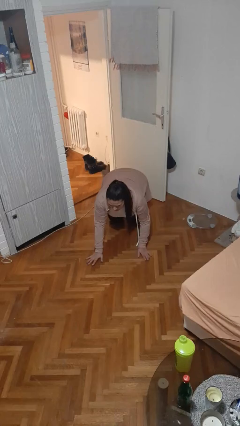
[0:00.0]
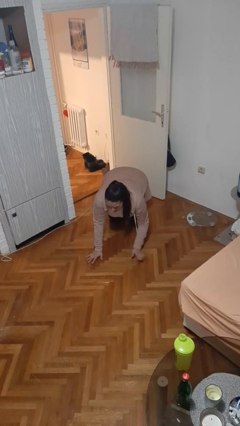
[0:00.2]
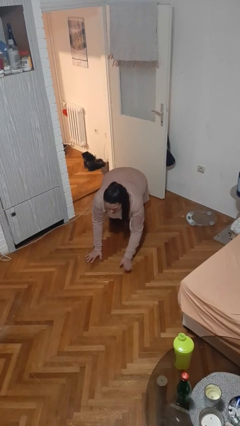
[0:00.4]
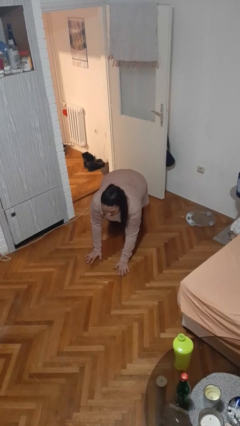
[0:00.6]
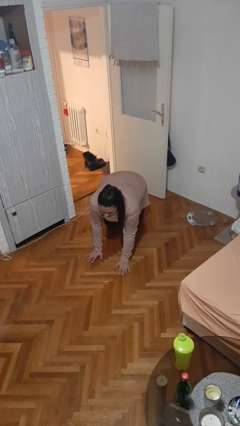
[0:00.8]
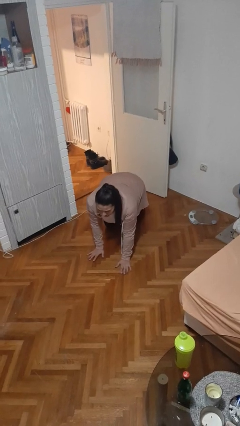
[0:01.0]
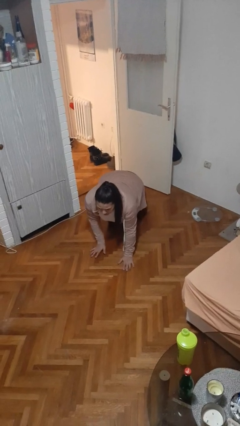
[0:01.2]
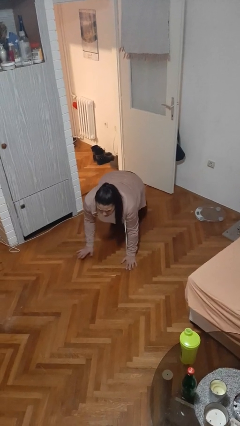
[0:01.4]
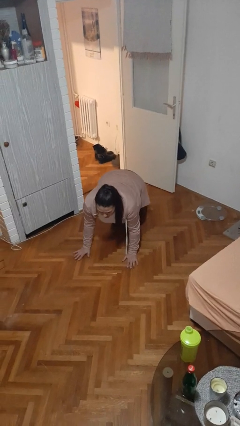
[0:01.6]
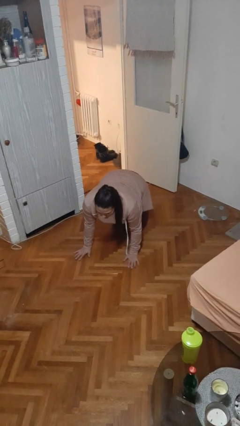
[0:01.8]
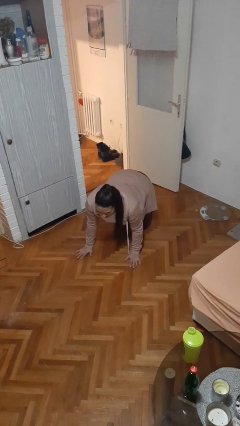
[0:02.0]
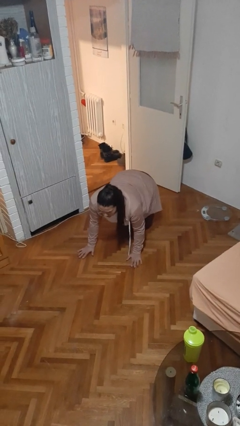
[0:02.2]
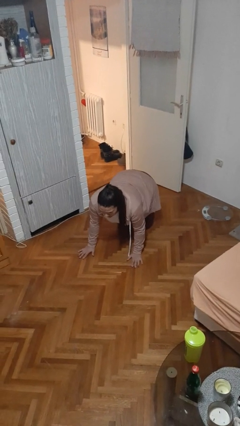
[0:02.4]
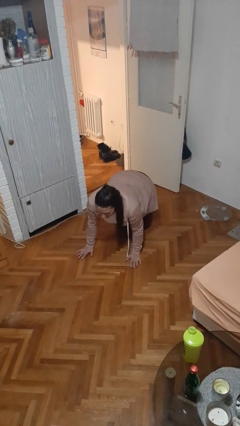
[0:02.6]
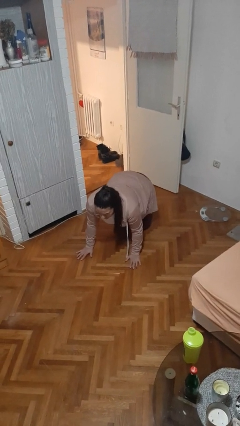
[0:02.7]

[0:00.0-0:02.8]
person crawls

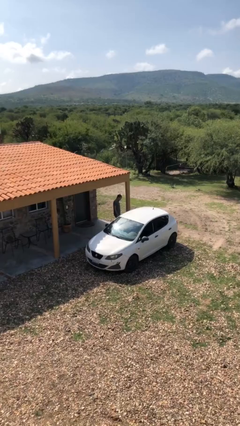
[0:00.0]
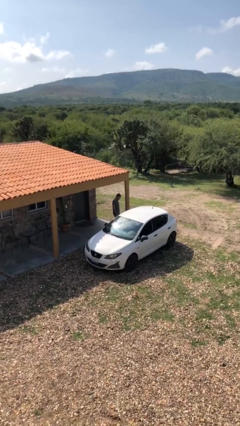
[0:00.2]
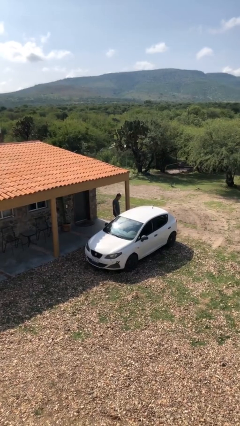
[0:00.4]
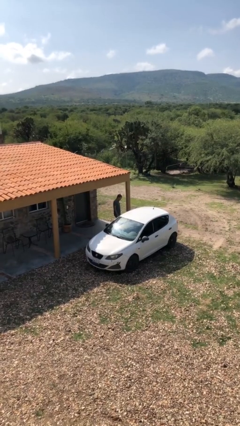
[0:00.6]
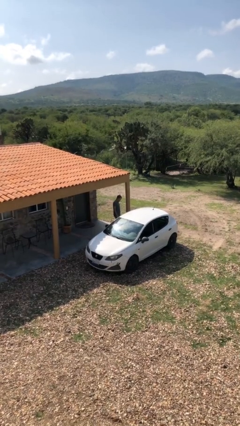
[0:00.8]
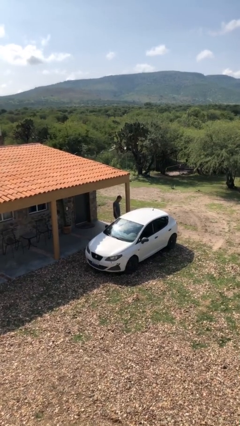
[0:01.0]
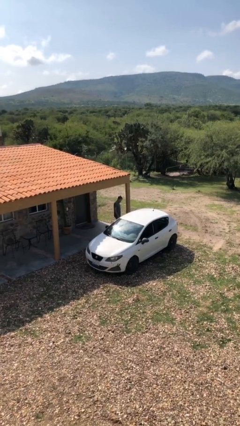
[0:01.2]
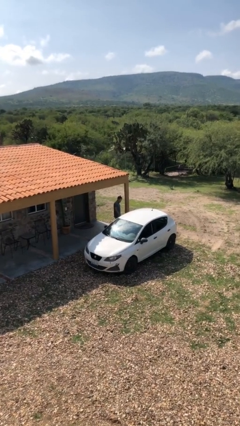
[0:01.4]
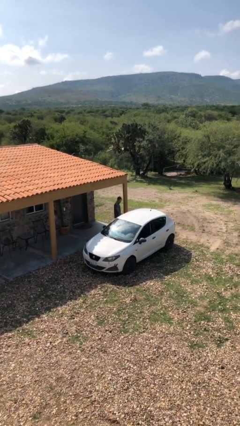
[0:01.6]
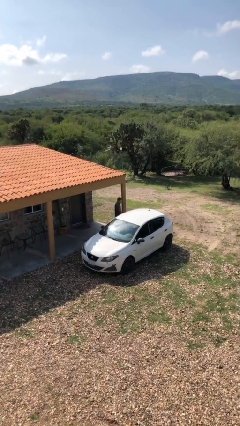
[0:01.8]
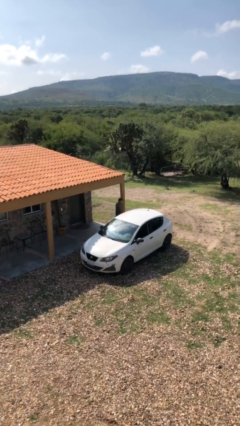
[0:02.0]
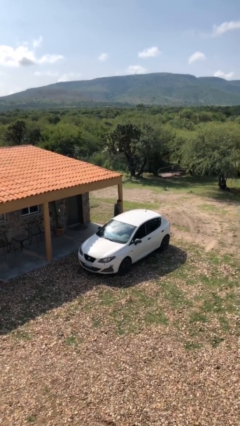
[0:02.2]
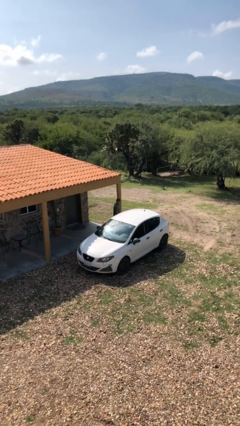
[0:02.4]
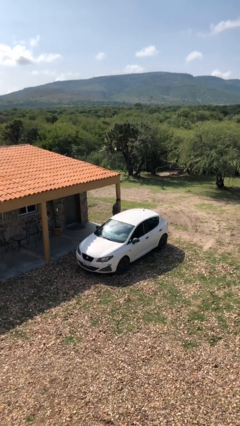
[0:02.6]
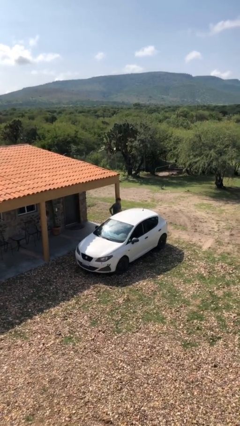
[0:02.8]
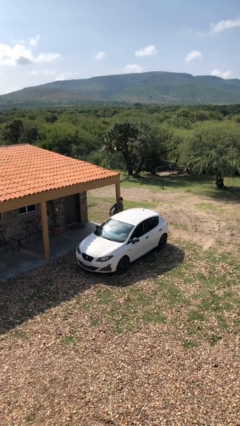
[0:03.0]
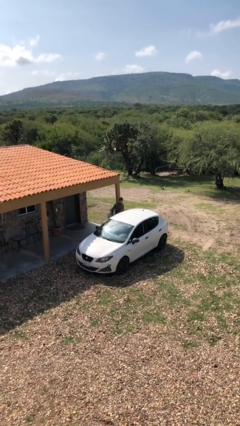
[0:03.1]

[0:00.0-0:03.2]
person opens car door

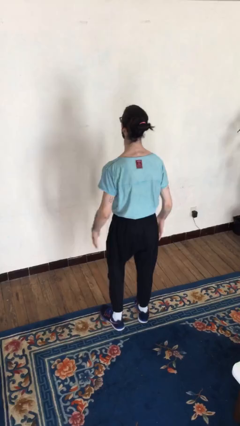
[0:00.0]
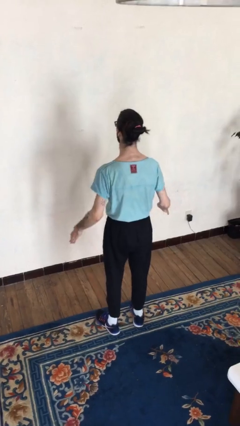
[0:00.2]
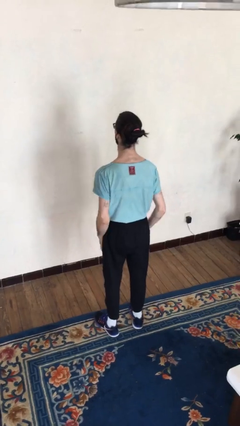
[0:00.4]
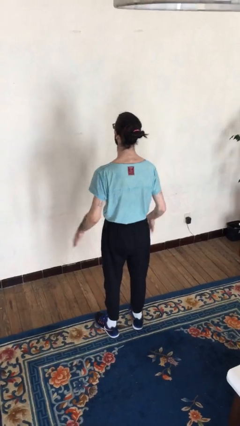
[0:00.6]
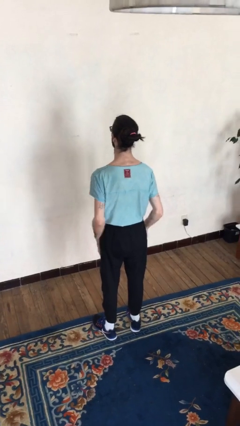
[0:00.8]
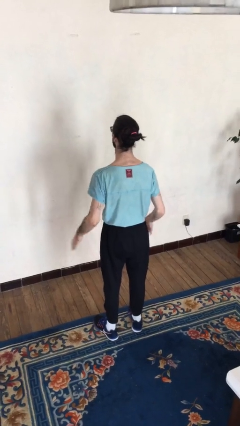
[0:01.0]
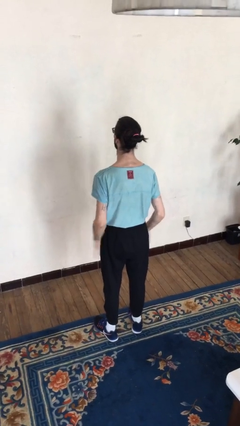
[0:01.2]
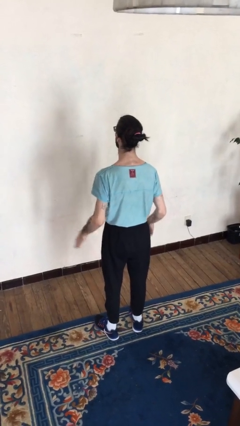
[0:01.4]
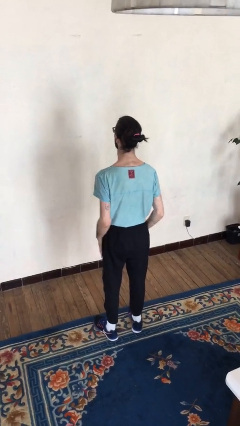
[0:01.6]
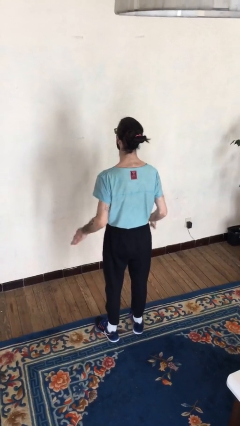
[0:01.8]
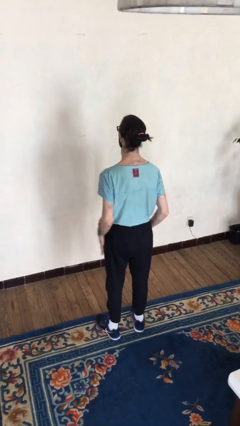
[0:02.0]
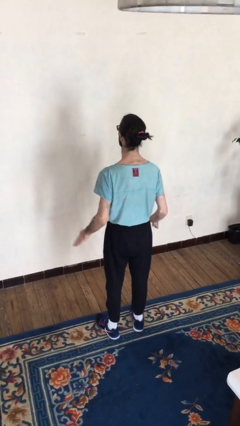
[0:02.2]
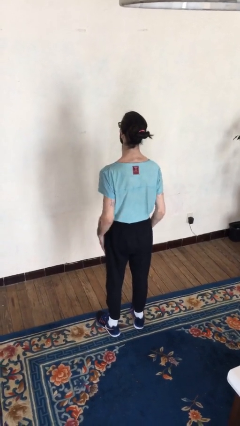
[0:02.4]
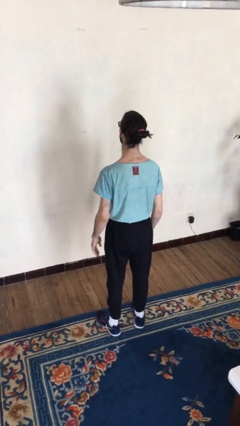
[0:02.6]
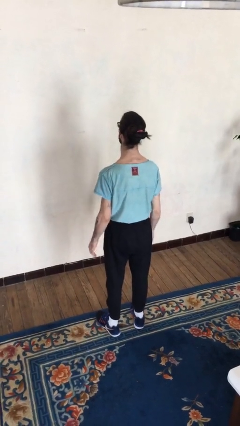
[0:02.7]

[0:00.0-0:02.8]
person slaps hands on thighs

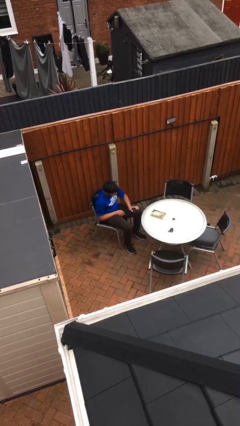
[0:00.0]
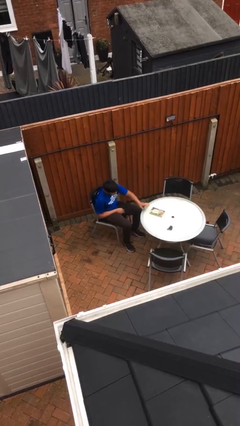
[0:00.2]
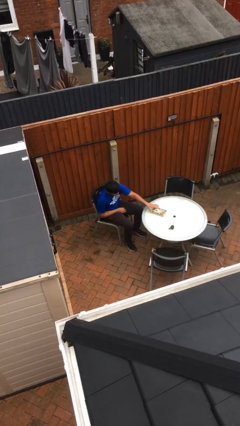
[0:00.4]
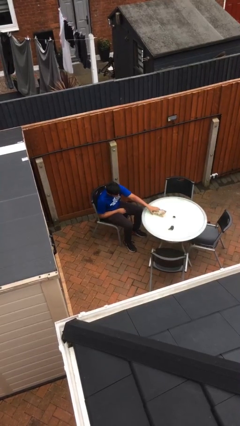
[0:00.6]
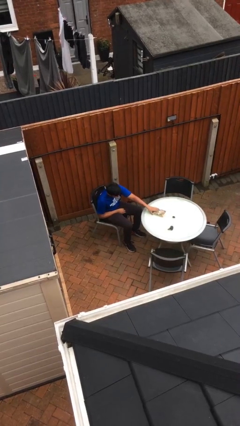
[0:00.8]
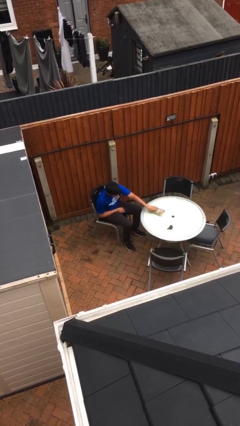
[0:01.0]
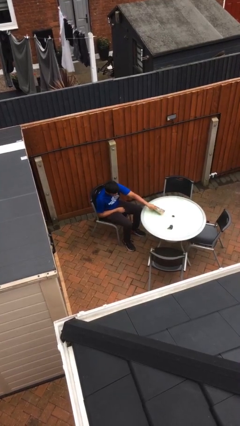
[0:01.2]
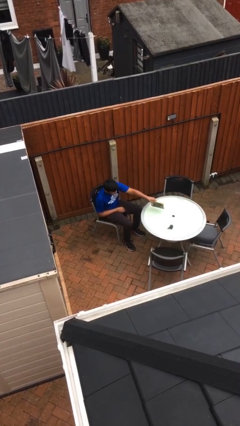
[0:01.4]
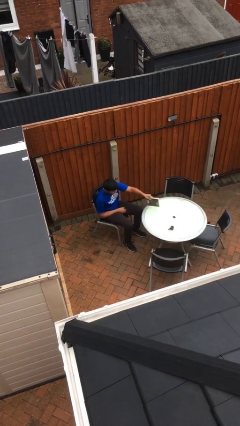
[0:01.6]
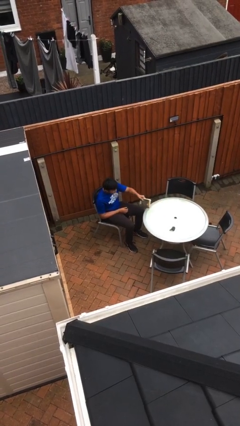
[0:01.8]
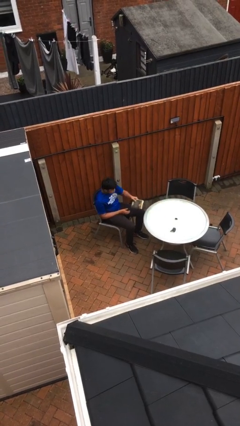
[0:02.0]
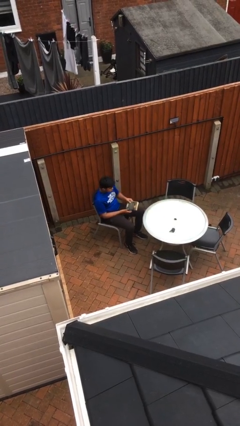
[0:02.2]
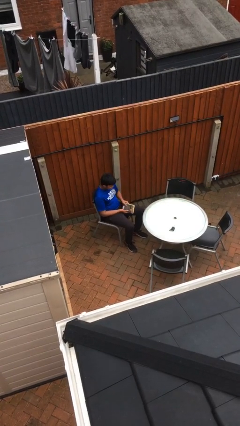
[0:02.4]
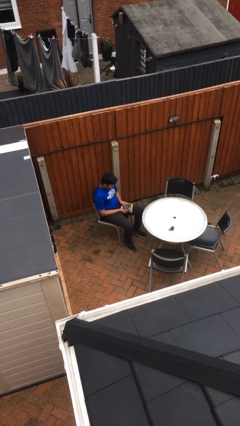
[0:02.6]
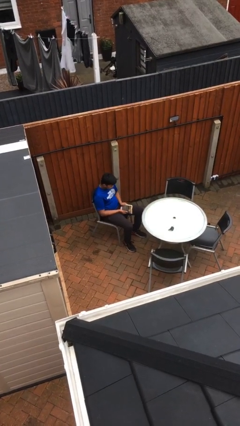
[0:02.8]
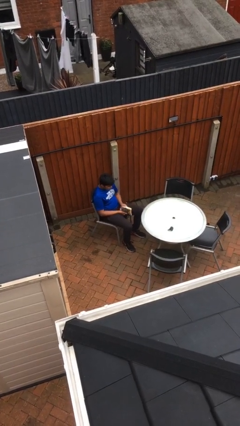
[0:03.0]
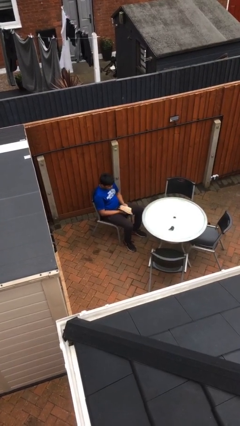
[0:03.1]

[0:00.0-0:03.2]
person picks up object from table

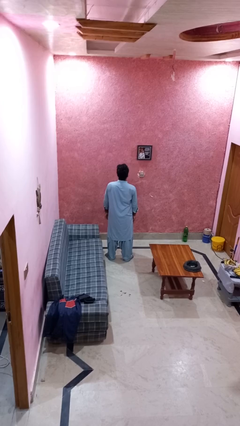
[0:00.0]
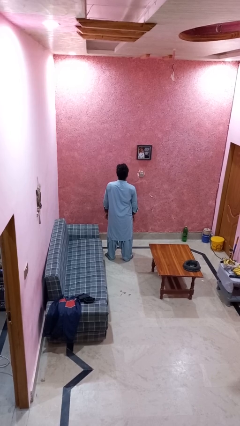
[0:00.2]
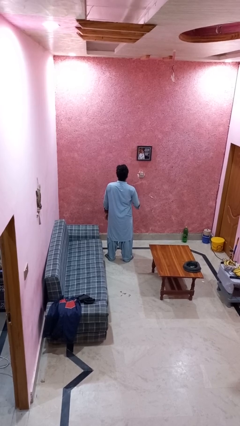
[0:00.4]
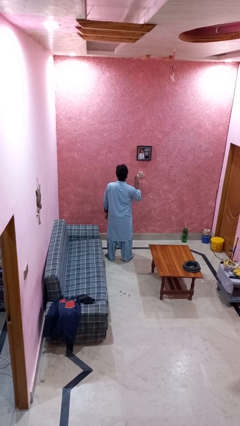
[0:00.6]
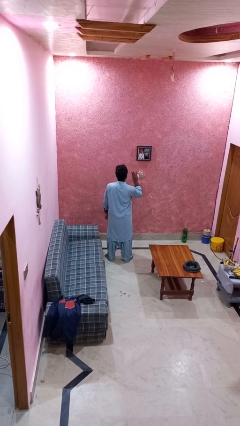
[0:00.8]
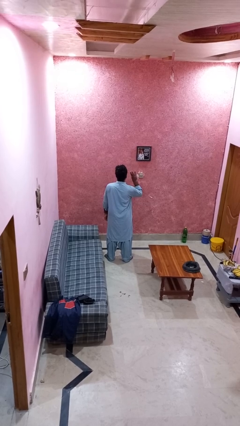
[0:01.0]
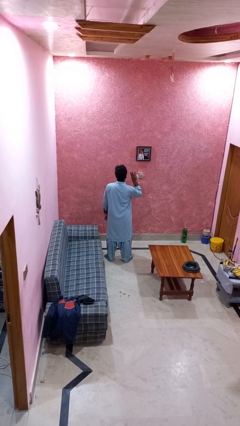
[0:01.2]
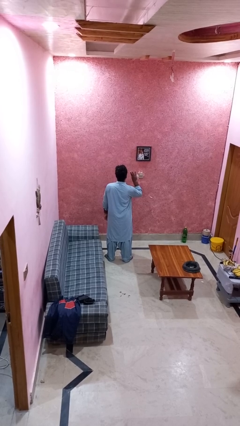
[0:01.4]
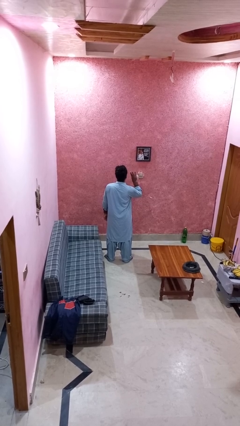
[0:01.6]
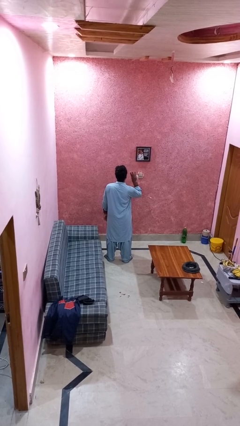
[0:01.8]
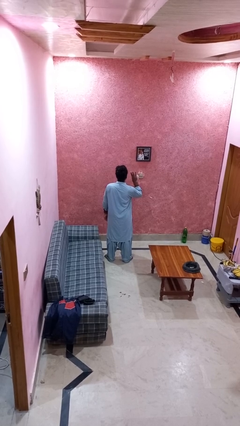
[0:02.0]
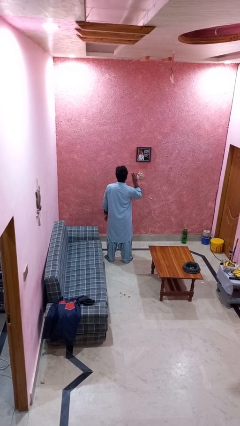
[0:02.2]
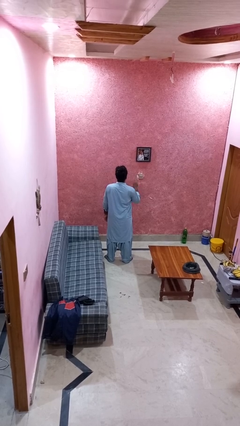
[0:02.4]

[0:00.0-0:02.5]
person gestures number three

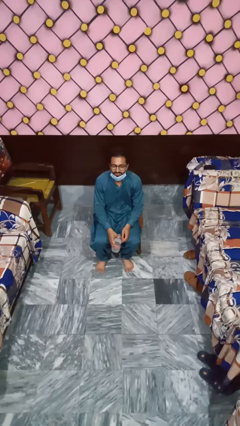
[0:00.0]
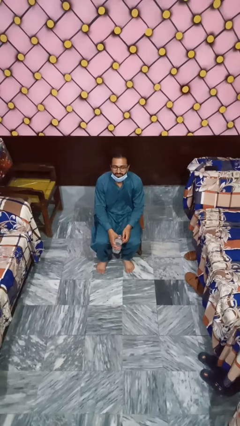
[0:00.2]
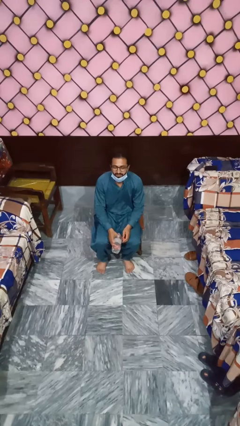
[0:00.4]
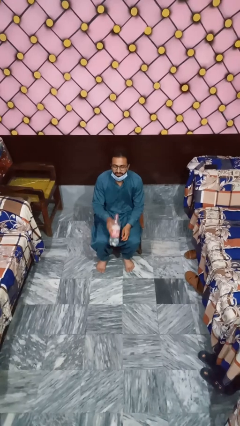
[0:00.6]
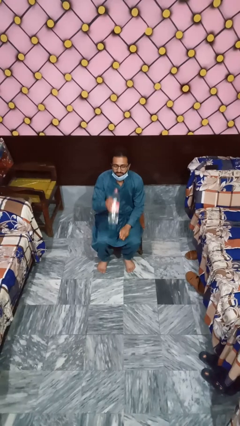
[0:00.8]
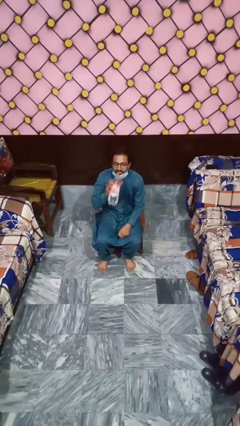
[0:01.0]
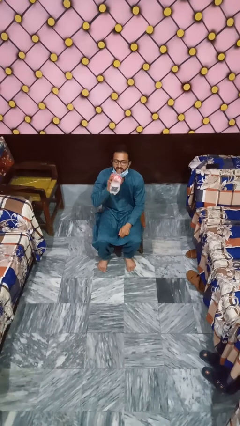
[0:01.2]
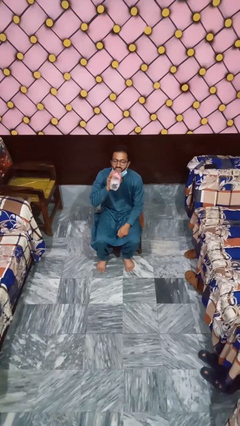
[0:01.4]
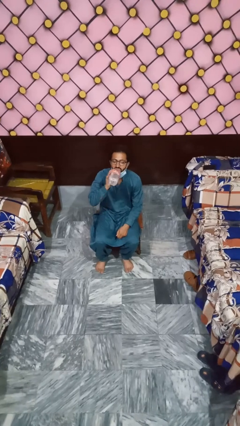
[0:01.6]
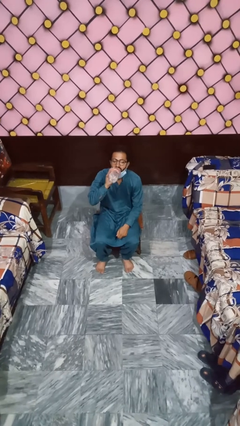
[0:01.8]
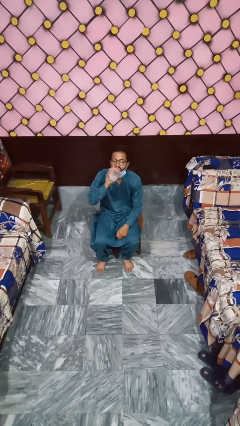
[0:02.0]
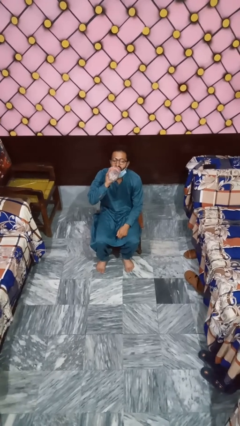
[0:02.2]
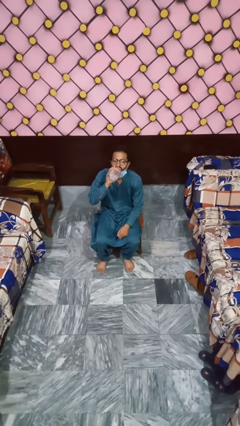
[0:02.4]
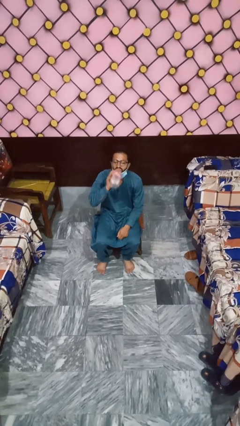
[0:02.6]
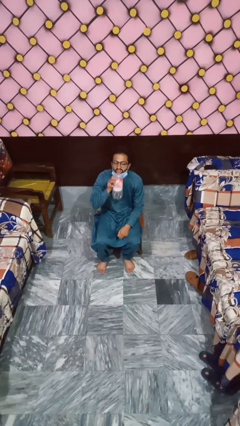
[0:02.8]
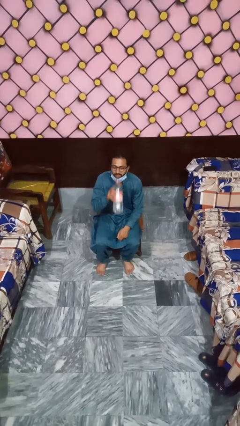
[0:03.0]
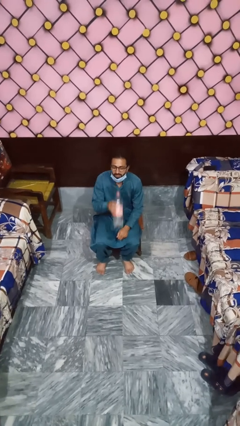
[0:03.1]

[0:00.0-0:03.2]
person drinks from bottle
